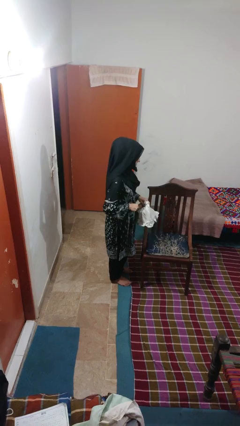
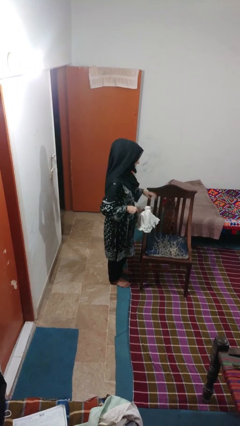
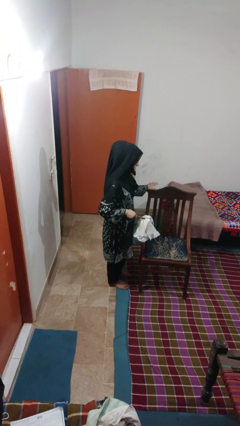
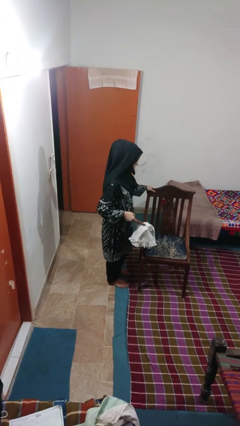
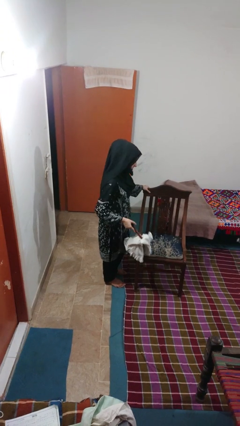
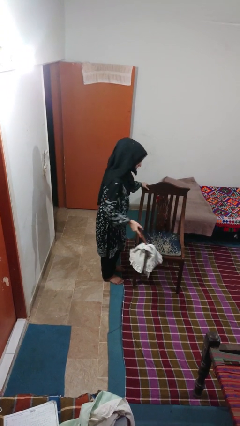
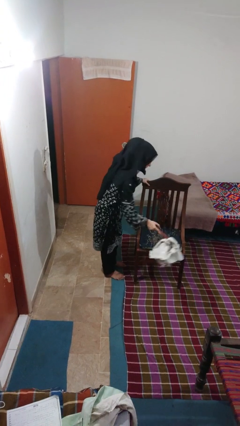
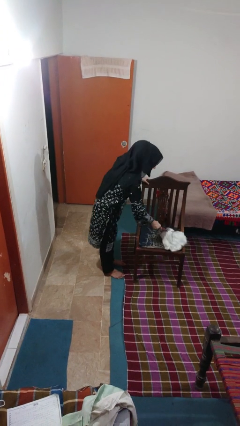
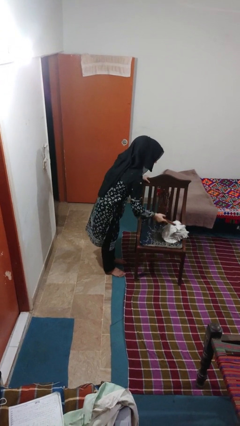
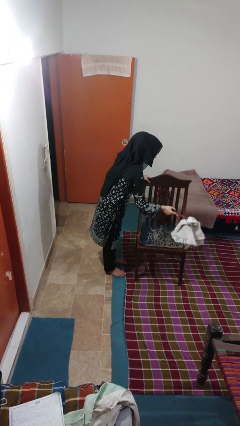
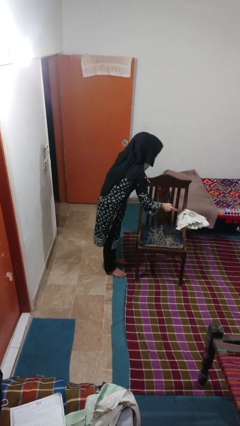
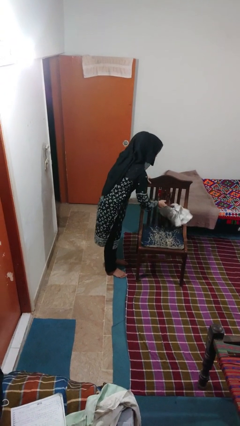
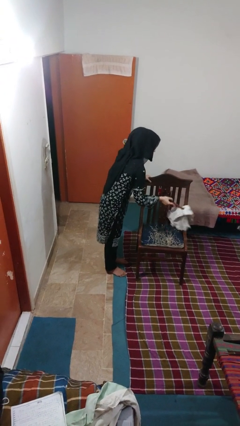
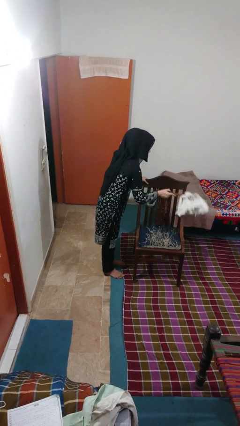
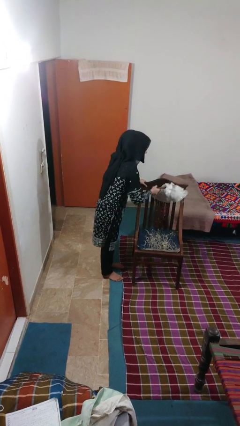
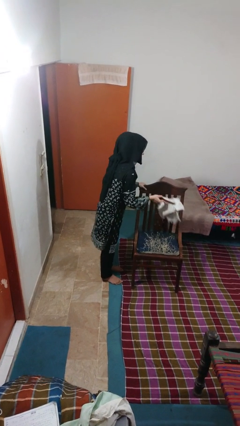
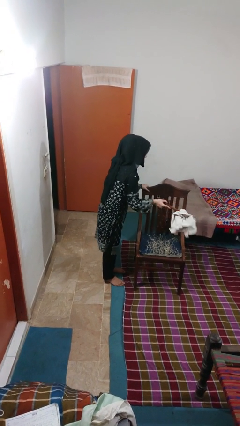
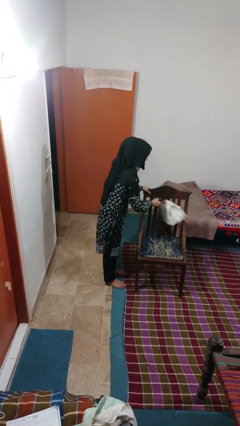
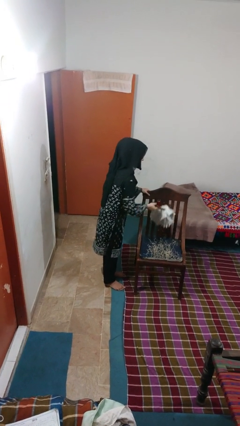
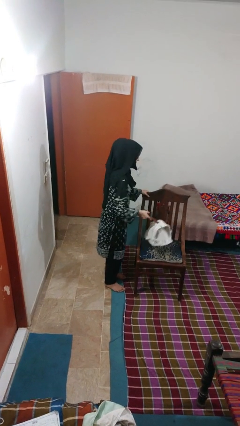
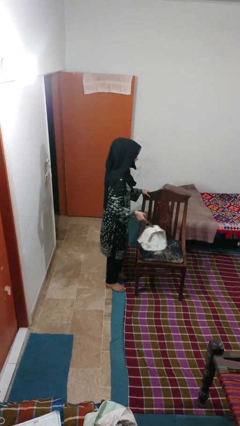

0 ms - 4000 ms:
person dusts furniture

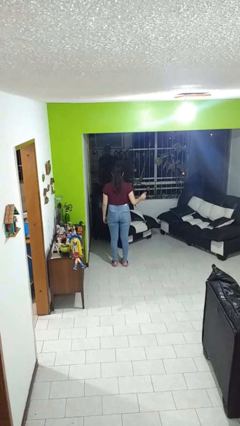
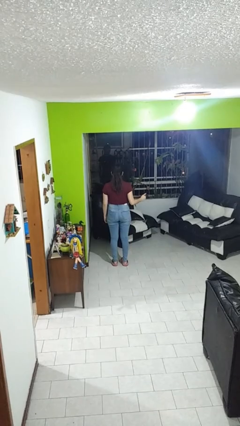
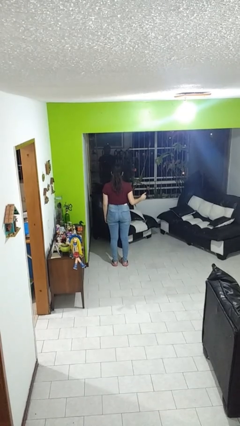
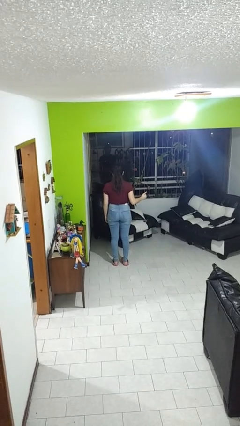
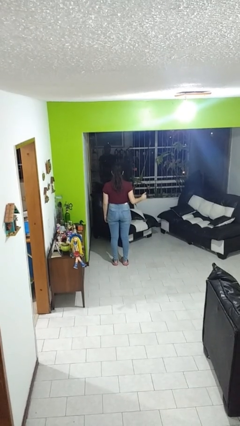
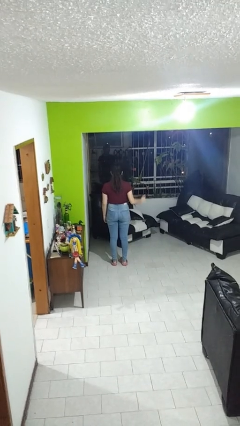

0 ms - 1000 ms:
person gestures thumbs up

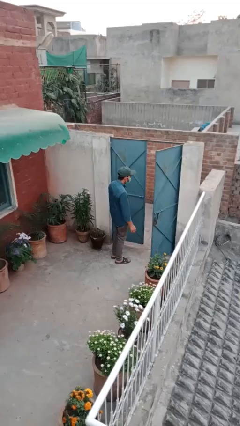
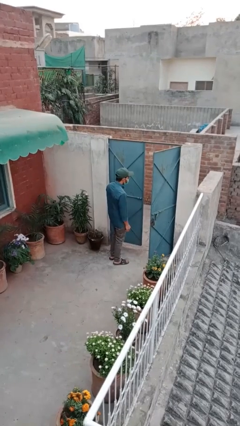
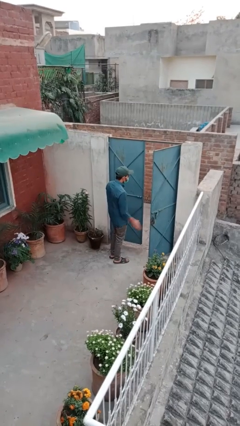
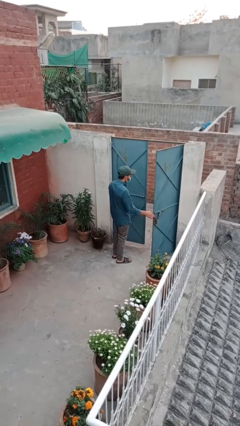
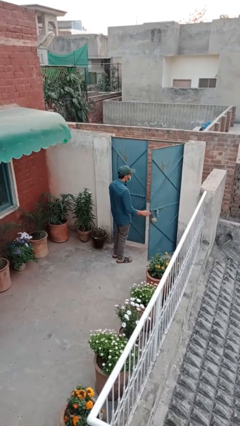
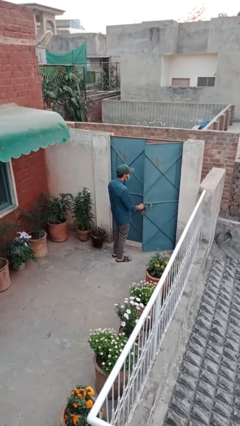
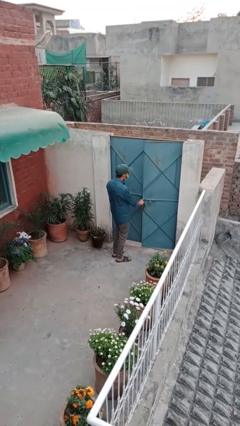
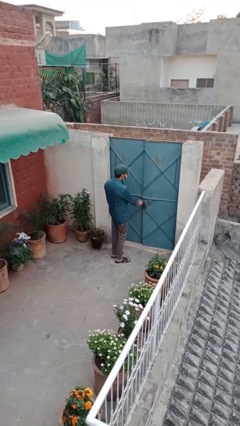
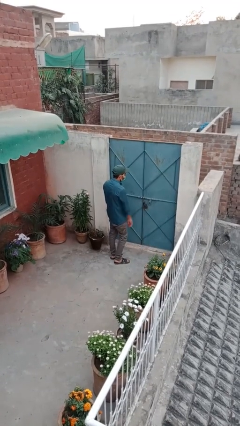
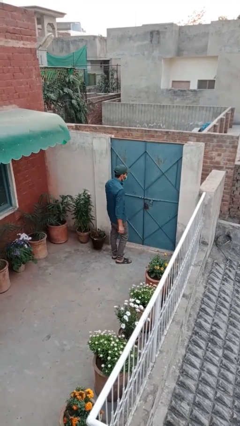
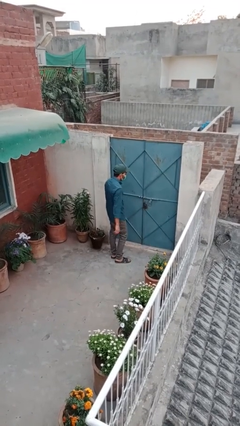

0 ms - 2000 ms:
person closes facility door

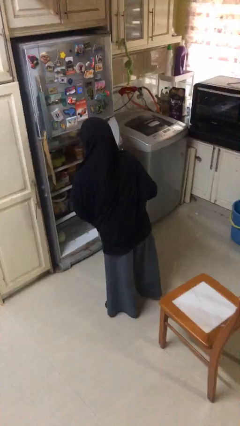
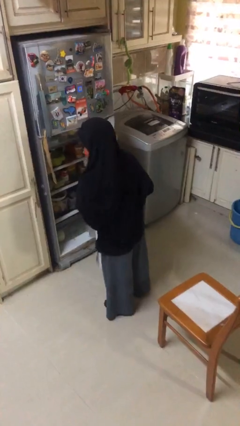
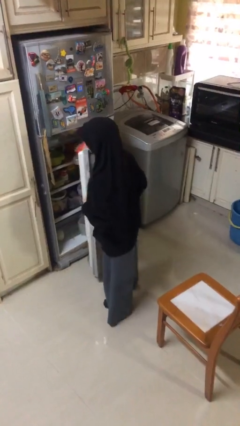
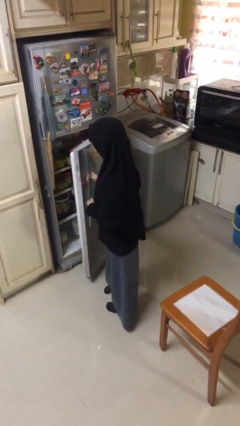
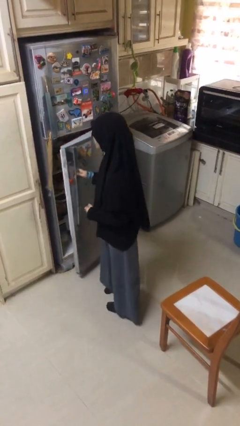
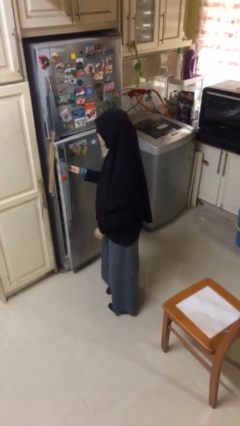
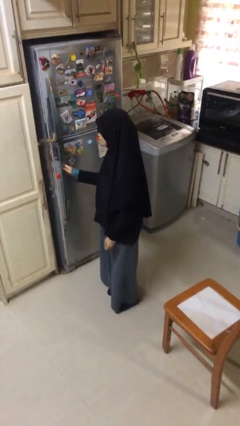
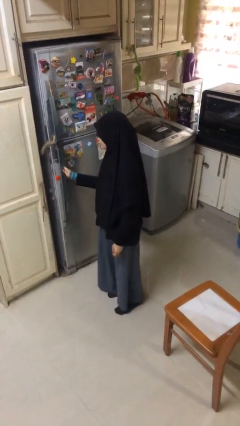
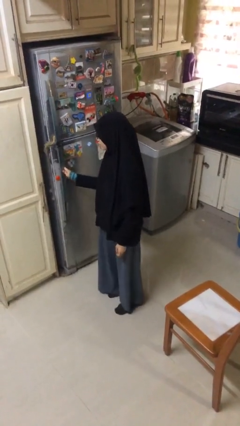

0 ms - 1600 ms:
person closes refrigerator

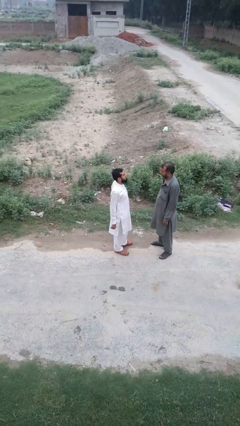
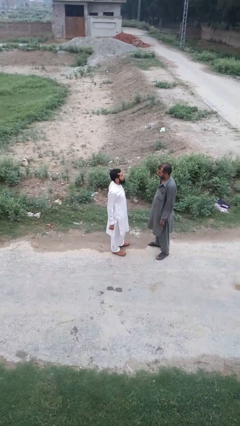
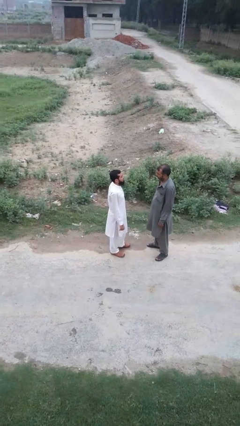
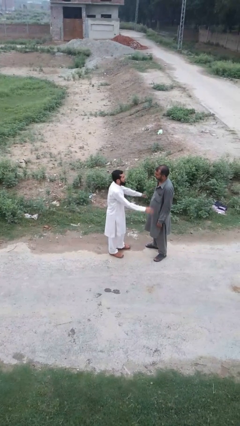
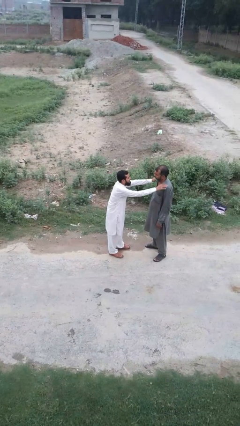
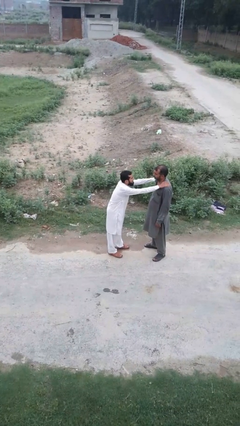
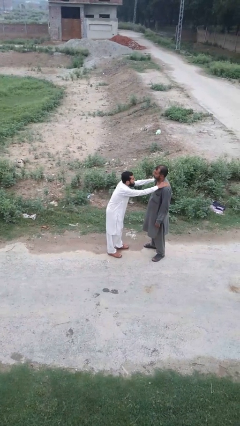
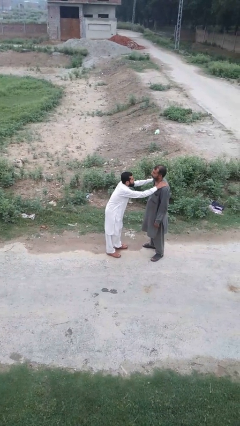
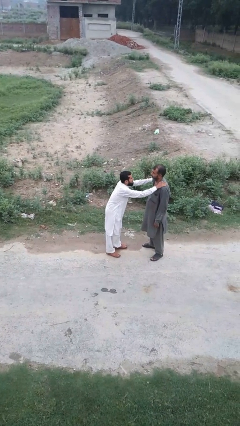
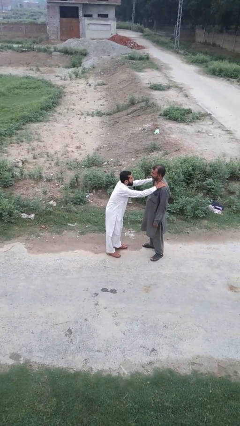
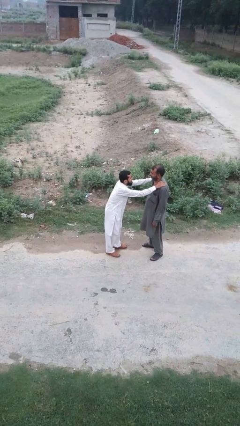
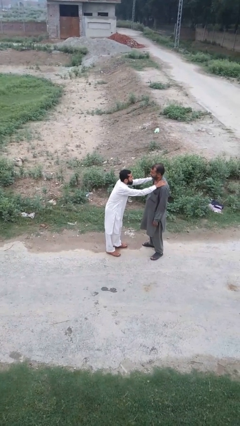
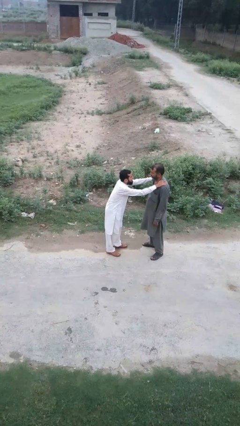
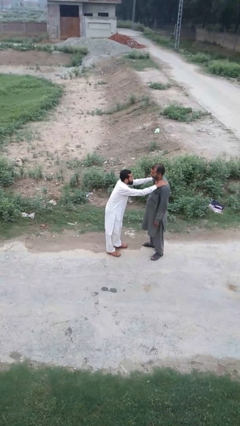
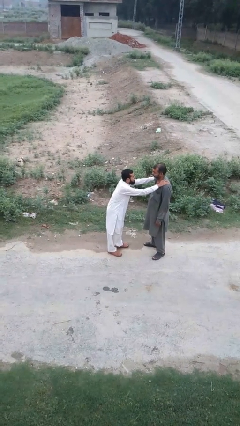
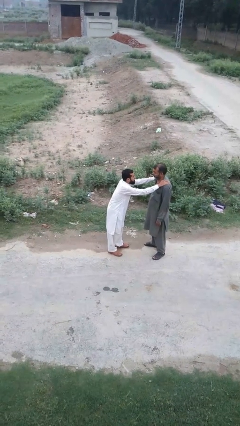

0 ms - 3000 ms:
person pounds shoulders of person

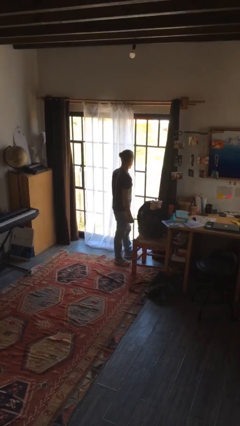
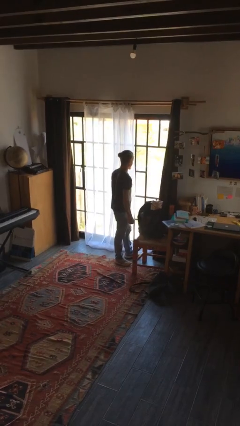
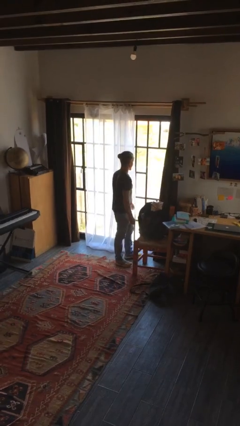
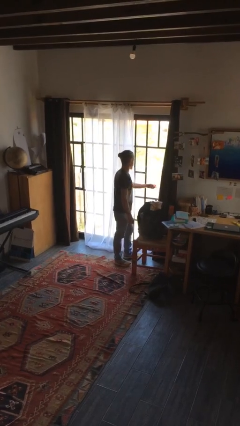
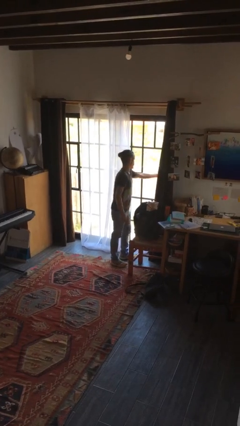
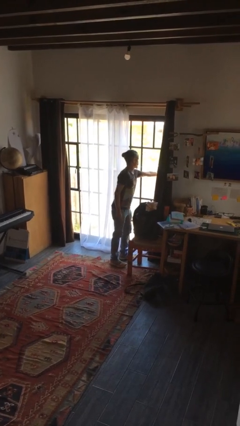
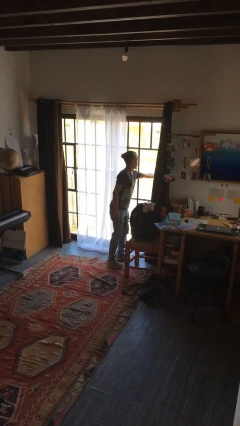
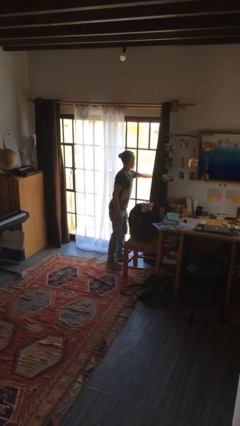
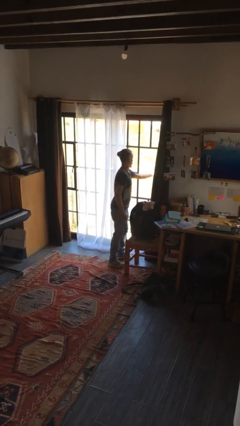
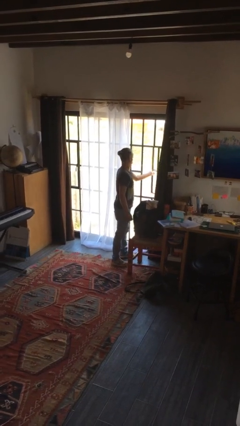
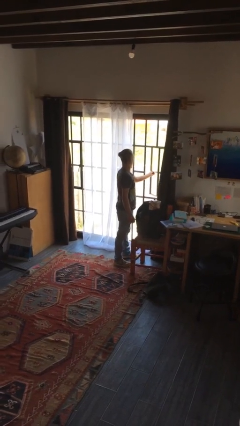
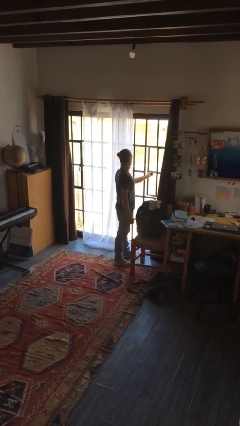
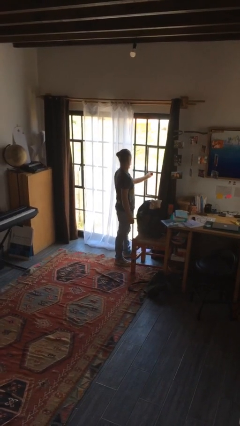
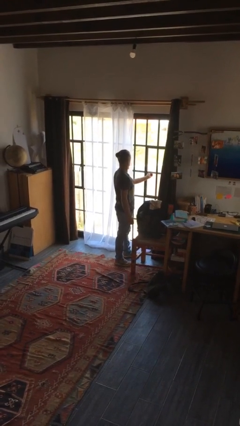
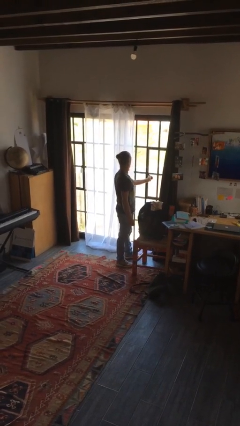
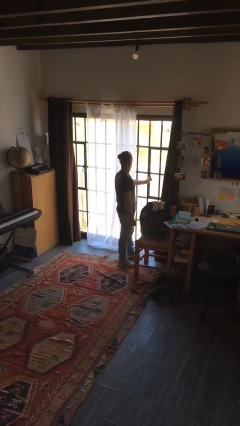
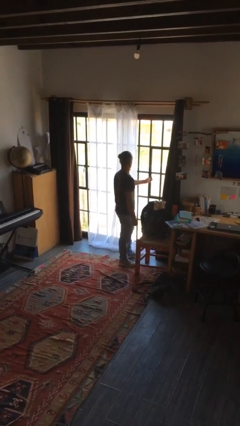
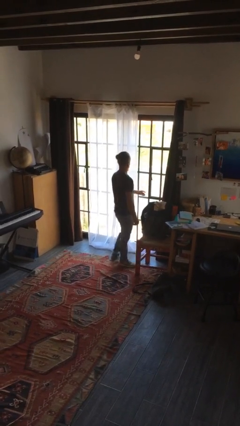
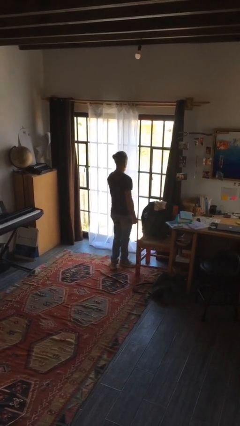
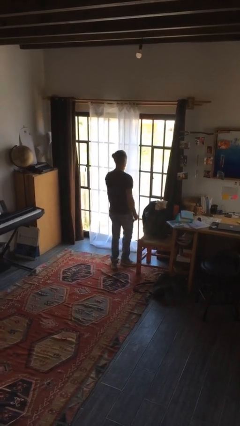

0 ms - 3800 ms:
person closes home window

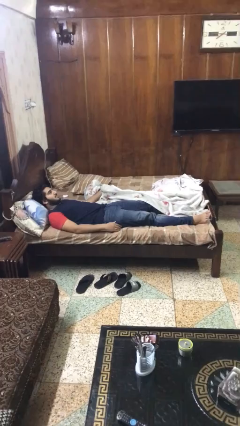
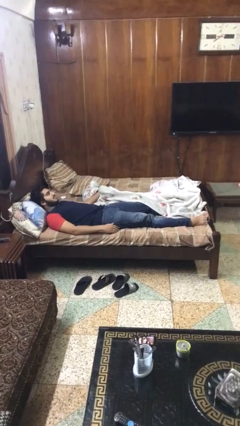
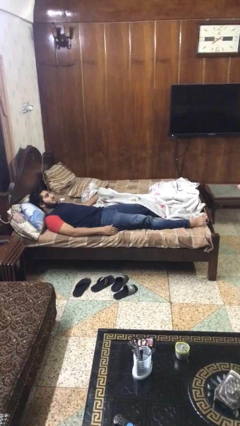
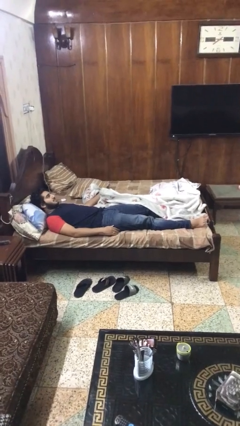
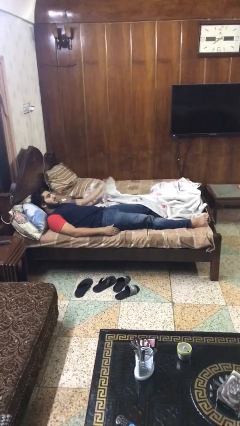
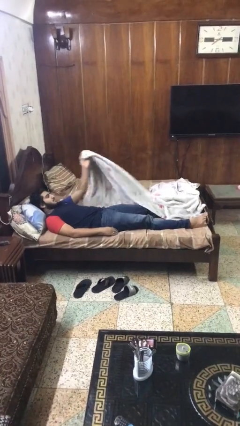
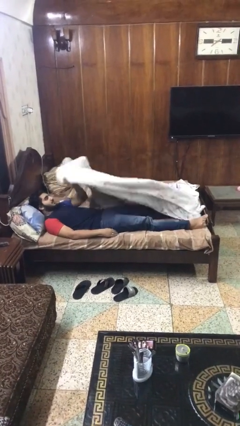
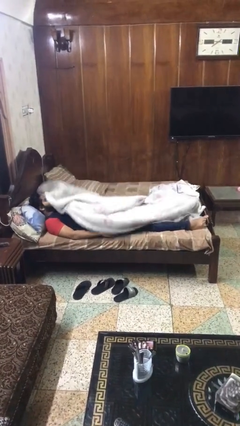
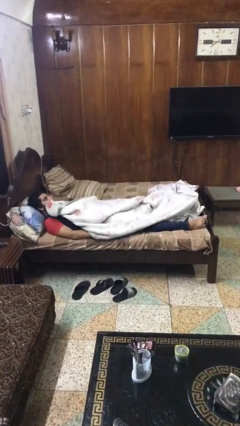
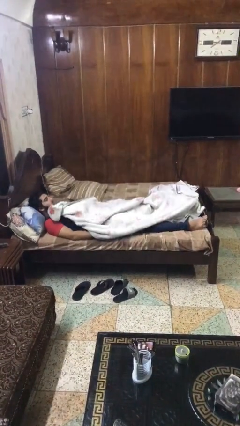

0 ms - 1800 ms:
person covers with blanket
